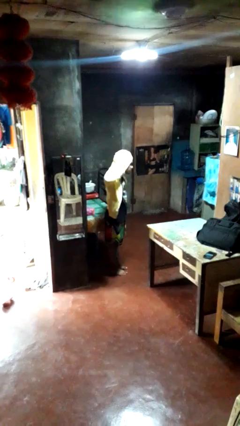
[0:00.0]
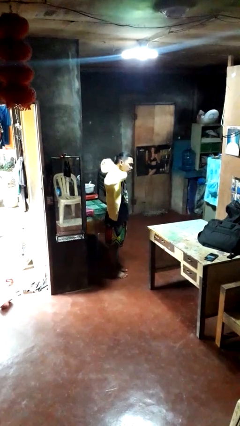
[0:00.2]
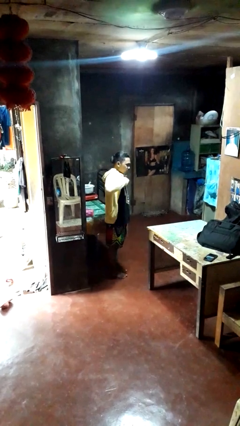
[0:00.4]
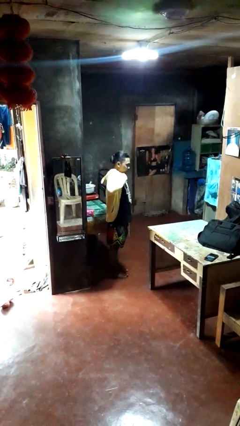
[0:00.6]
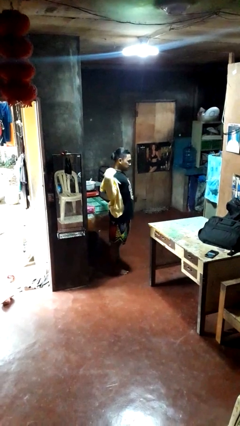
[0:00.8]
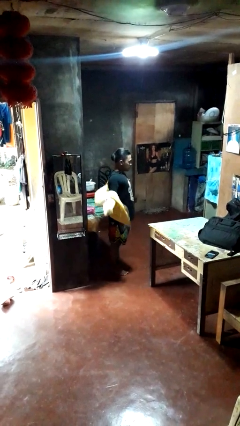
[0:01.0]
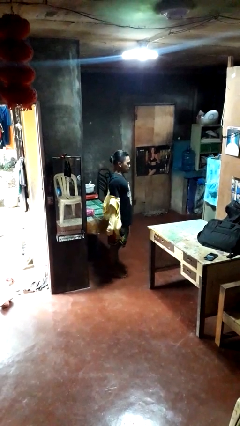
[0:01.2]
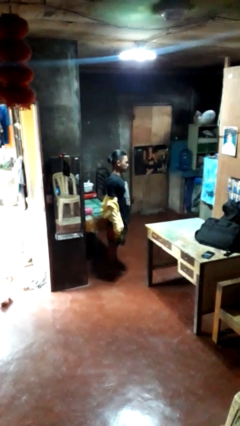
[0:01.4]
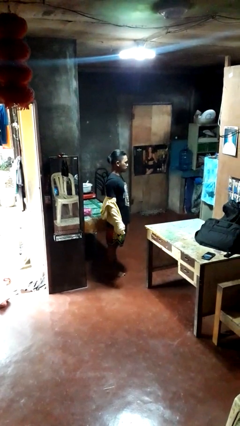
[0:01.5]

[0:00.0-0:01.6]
person takes off hoodie

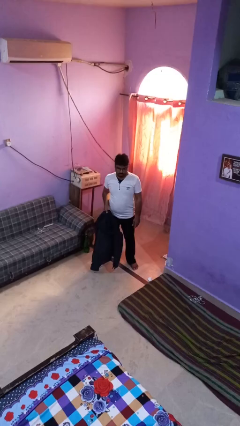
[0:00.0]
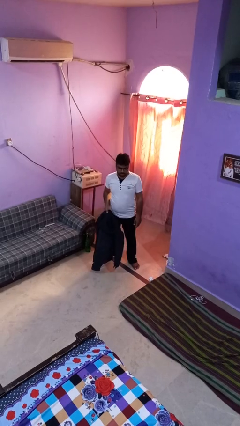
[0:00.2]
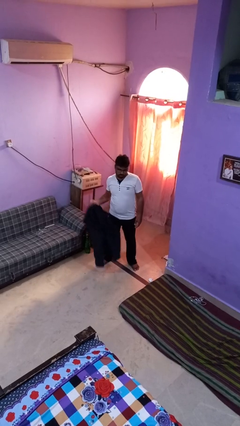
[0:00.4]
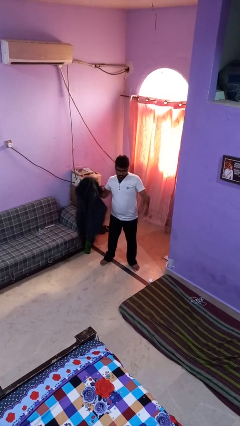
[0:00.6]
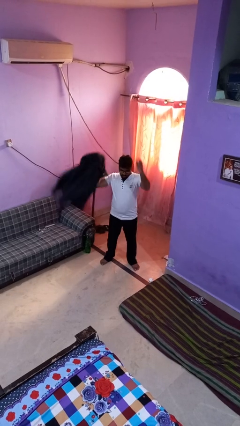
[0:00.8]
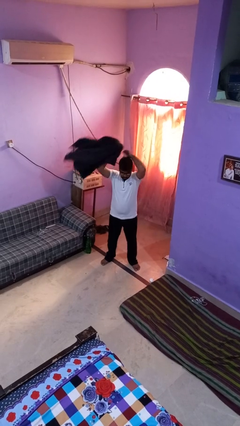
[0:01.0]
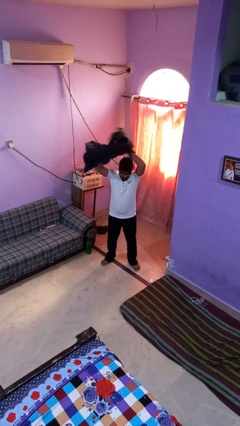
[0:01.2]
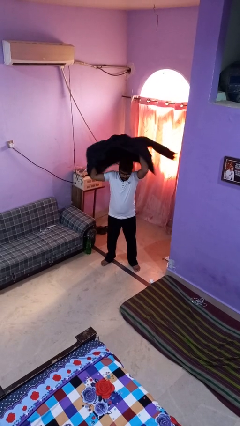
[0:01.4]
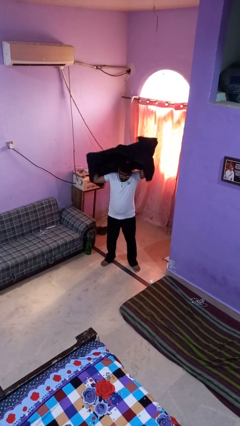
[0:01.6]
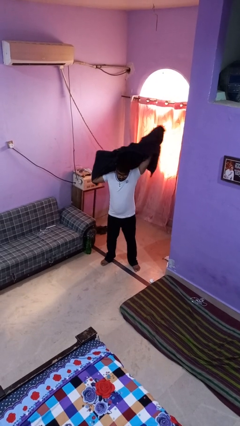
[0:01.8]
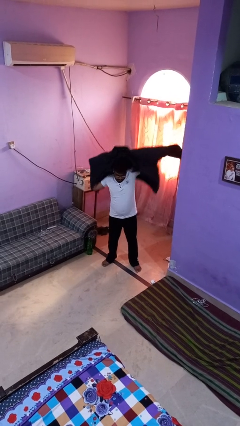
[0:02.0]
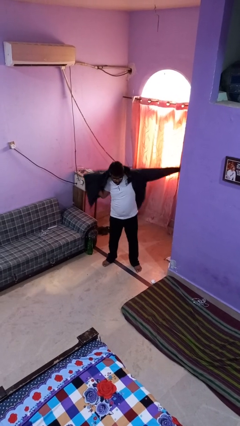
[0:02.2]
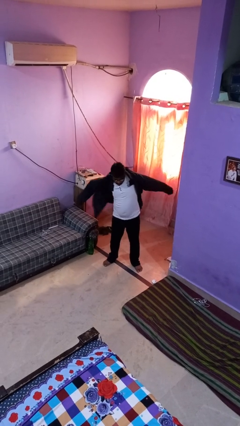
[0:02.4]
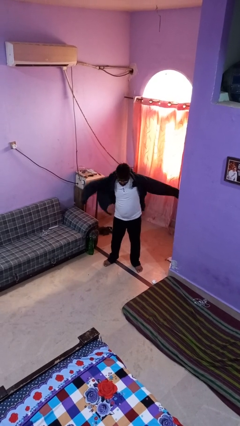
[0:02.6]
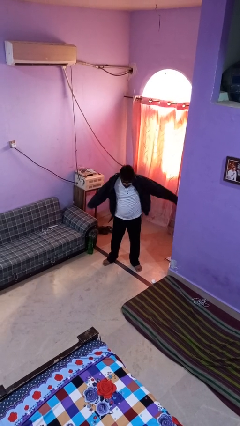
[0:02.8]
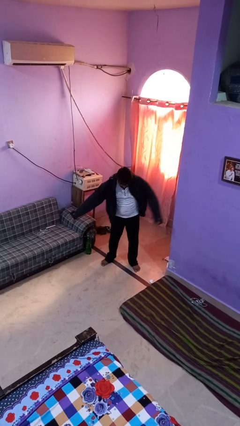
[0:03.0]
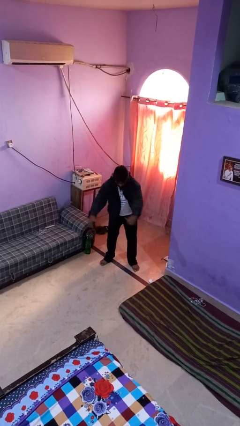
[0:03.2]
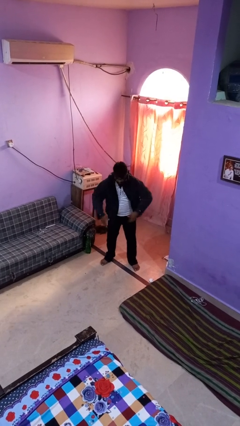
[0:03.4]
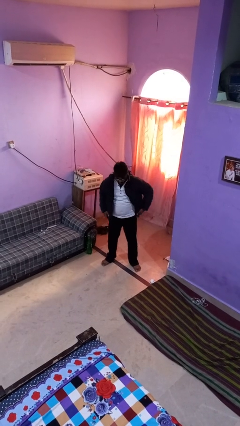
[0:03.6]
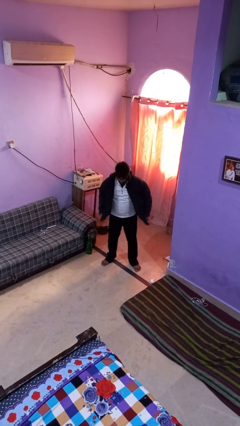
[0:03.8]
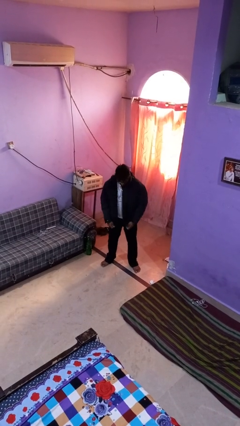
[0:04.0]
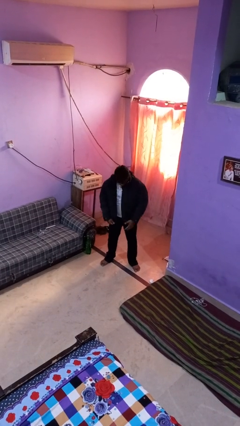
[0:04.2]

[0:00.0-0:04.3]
person puts on jacket

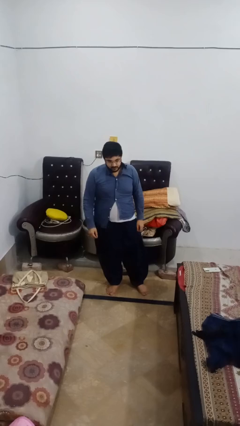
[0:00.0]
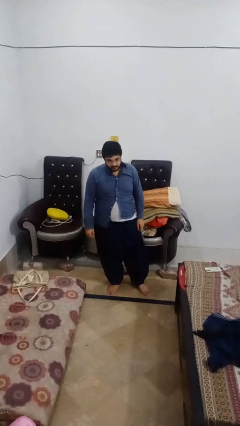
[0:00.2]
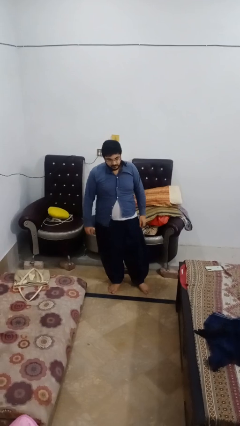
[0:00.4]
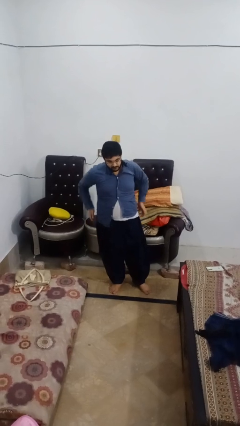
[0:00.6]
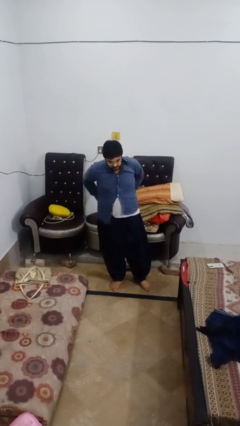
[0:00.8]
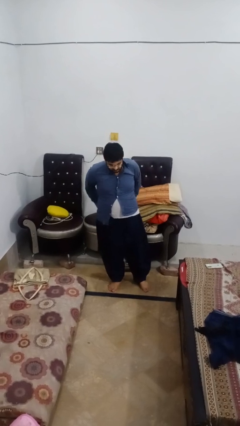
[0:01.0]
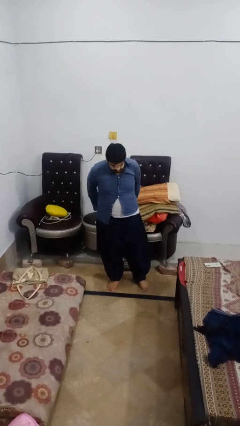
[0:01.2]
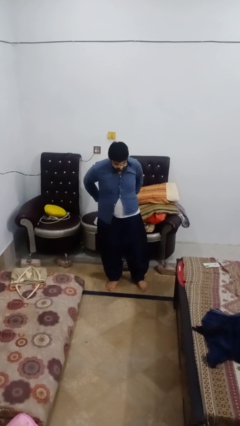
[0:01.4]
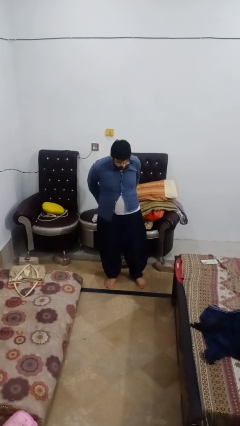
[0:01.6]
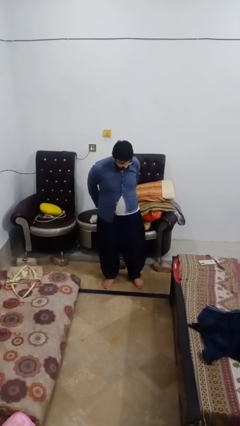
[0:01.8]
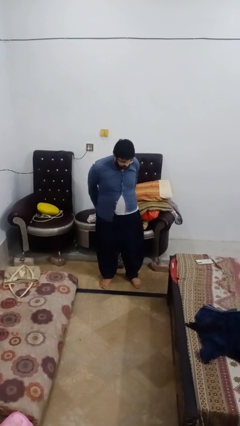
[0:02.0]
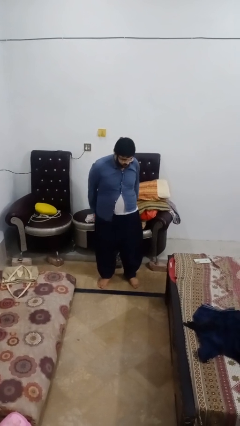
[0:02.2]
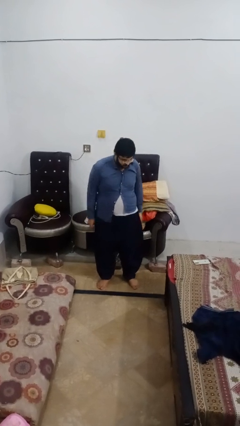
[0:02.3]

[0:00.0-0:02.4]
person puts hands in back pockets

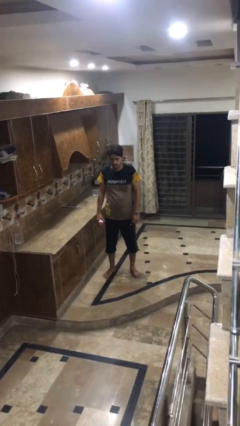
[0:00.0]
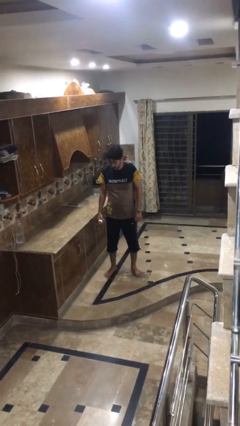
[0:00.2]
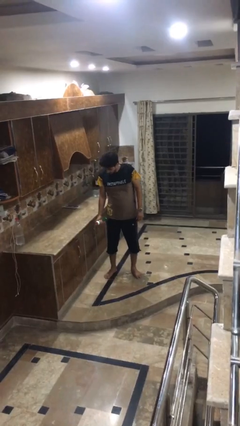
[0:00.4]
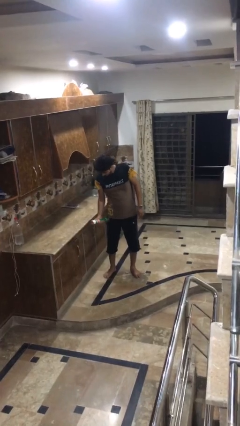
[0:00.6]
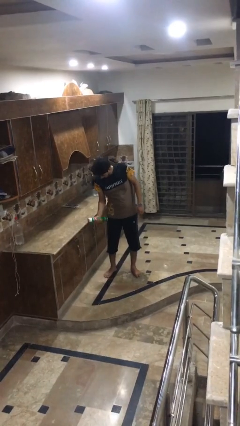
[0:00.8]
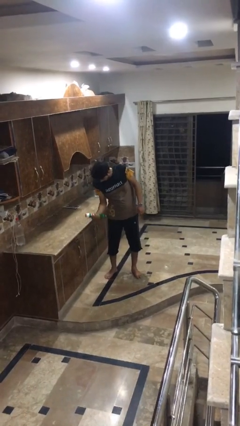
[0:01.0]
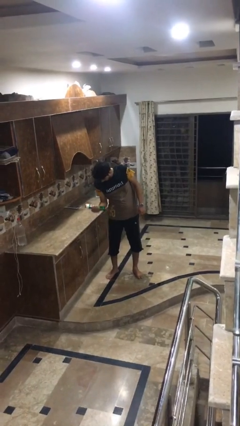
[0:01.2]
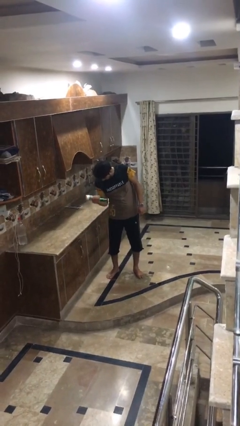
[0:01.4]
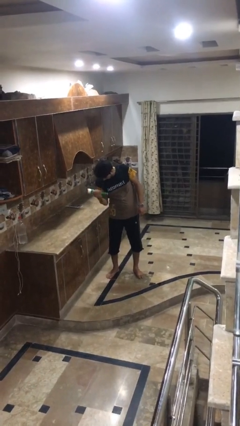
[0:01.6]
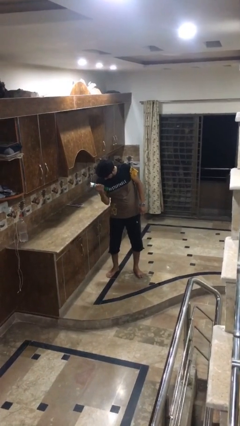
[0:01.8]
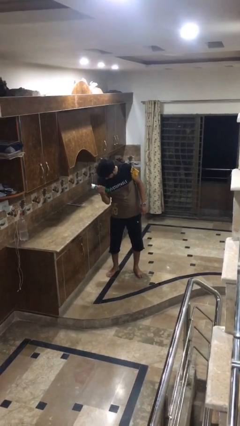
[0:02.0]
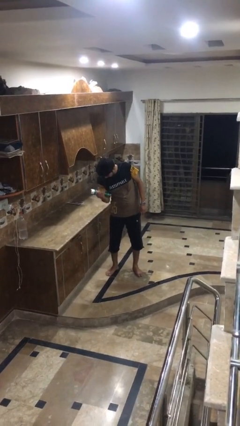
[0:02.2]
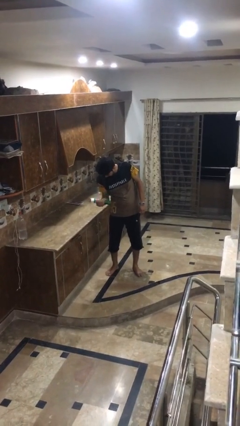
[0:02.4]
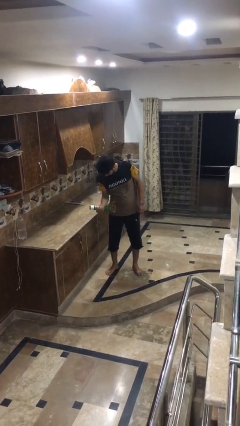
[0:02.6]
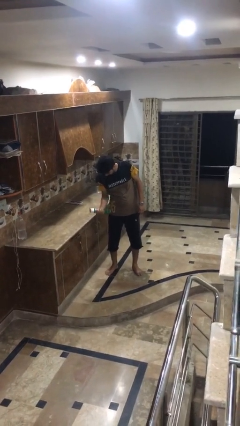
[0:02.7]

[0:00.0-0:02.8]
person lifts dumbbells

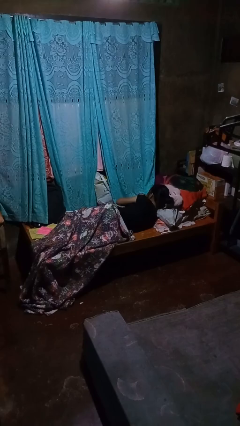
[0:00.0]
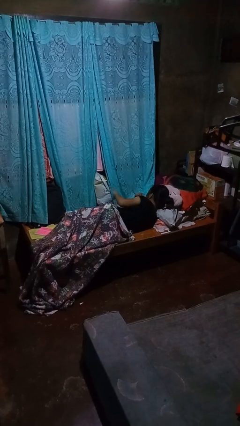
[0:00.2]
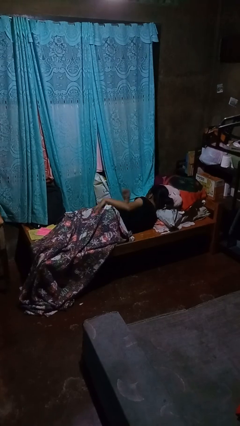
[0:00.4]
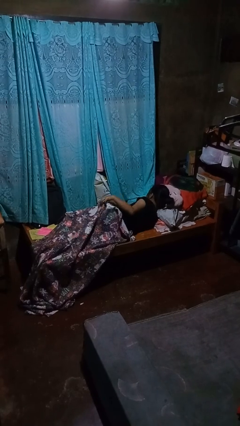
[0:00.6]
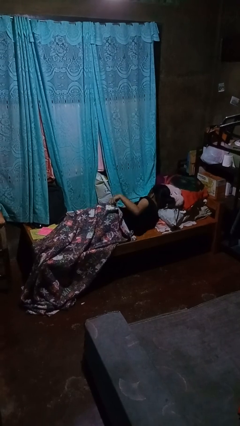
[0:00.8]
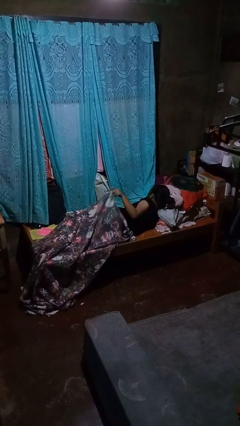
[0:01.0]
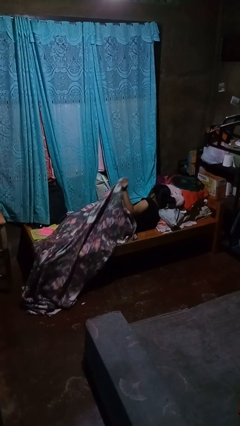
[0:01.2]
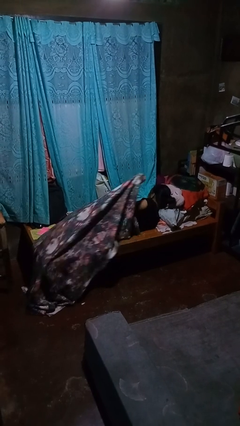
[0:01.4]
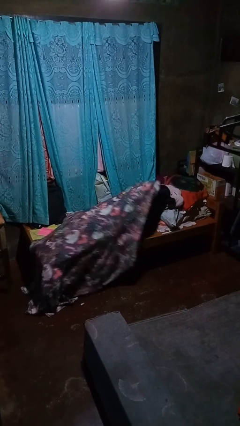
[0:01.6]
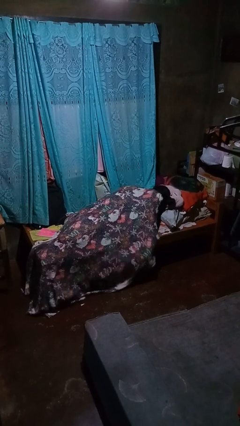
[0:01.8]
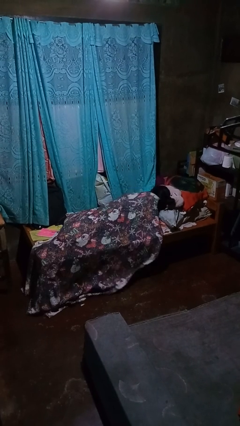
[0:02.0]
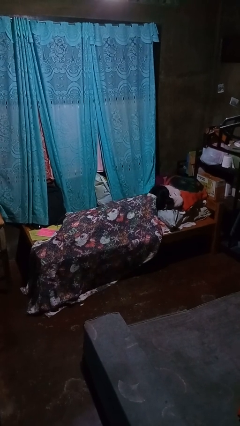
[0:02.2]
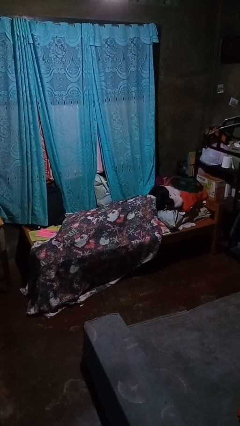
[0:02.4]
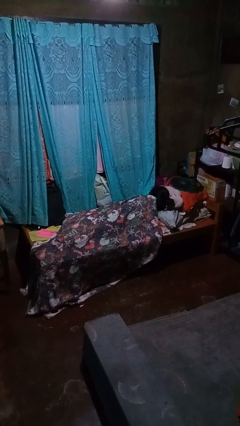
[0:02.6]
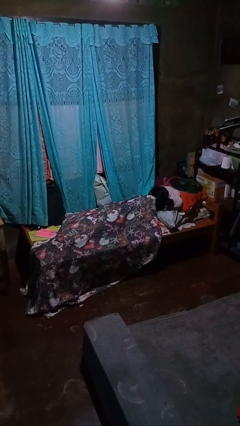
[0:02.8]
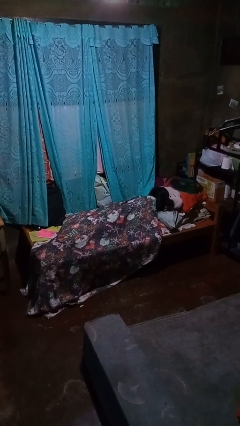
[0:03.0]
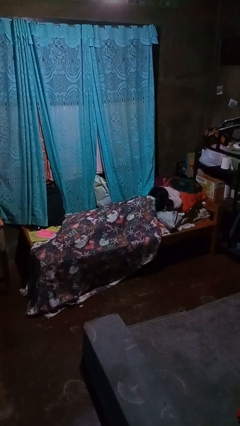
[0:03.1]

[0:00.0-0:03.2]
person covers with bedsheets

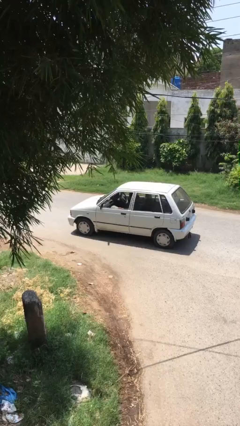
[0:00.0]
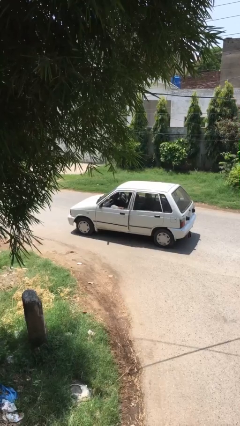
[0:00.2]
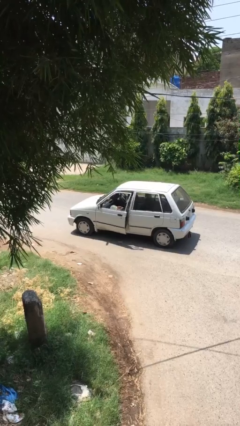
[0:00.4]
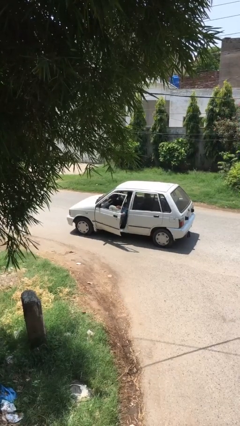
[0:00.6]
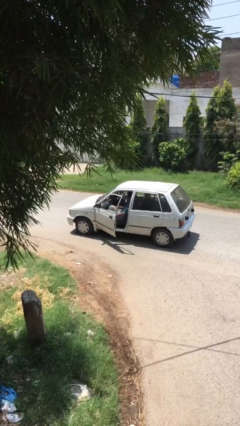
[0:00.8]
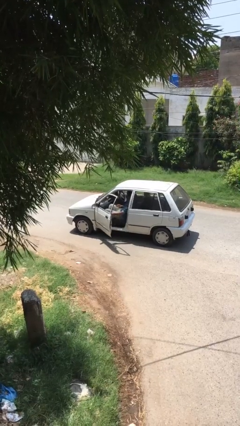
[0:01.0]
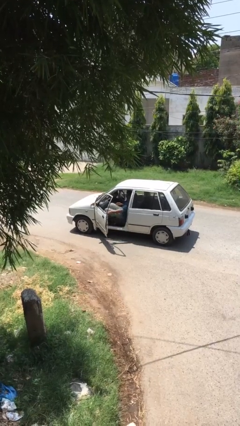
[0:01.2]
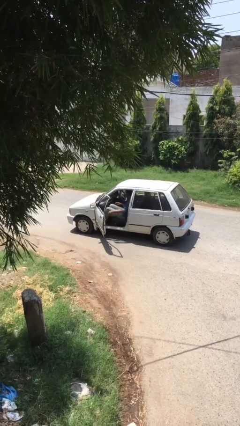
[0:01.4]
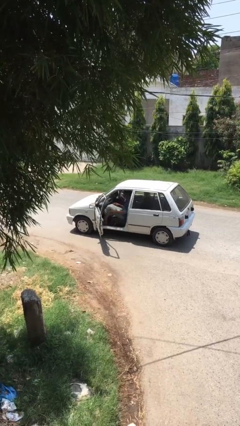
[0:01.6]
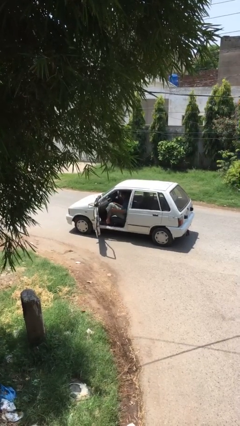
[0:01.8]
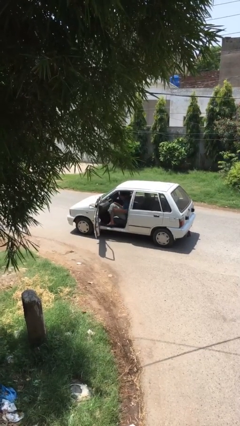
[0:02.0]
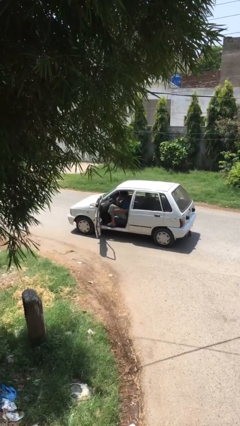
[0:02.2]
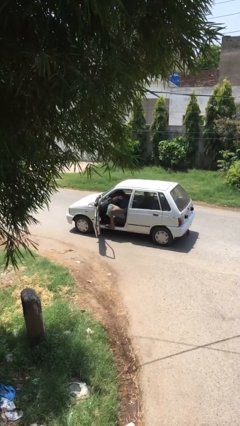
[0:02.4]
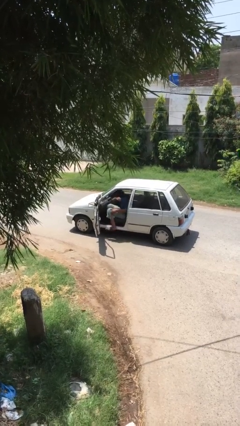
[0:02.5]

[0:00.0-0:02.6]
person opens car door

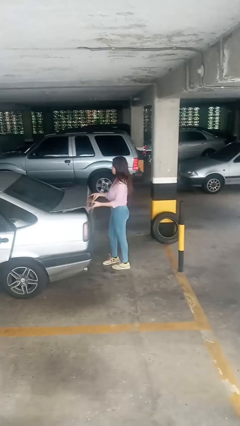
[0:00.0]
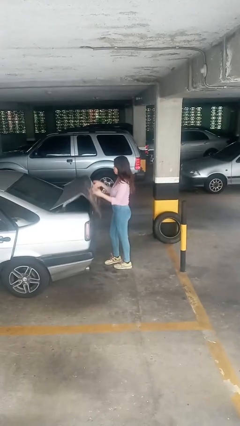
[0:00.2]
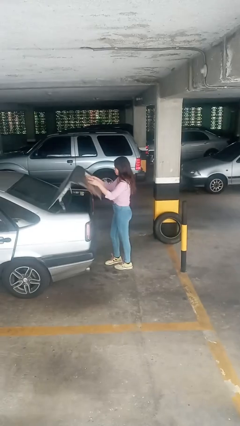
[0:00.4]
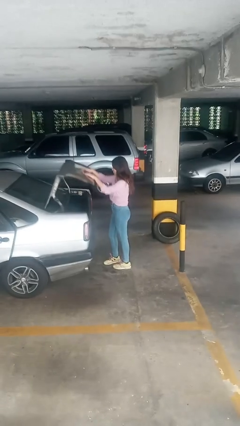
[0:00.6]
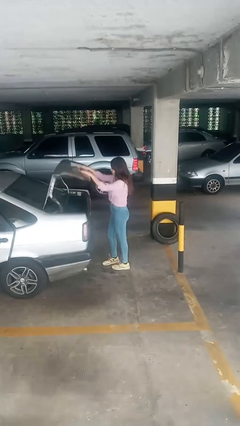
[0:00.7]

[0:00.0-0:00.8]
person opens car trunk
